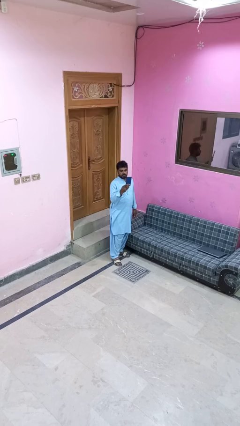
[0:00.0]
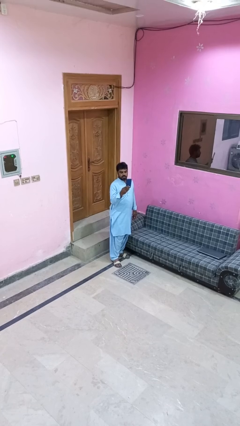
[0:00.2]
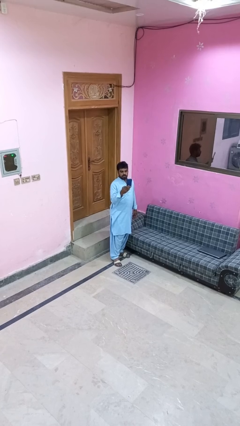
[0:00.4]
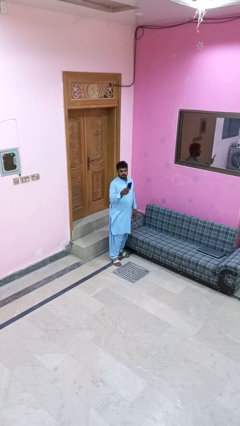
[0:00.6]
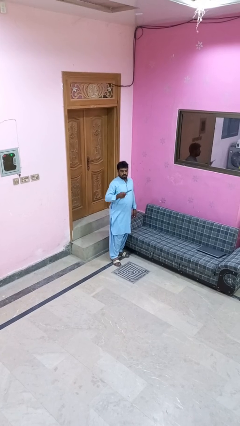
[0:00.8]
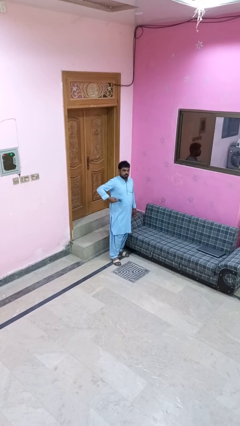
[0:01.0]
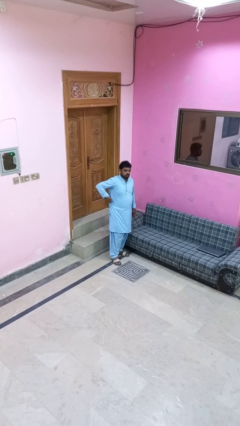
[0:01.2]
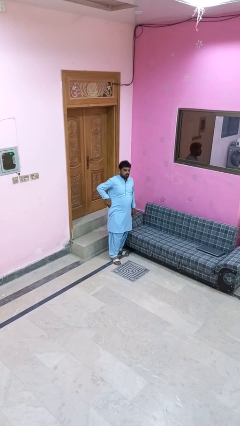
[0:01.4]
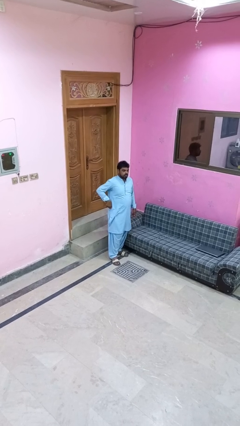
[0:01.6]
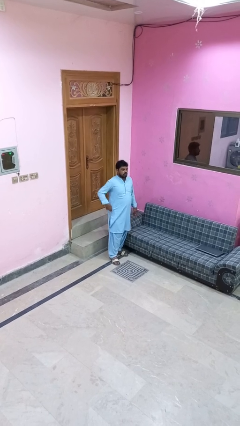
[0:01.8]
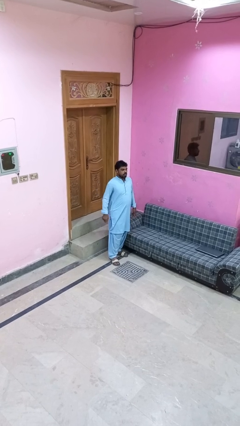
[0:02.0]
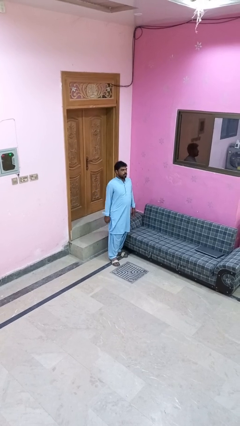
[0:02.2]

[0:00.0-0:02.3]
person puts phone into pocket

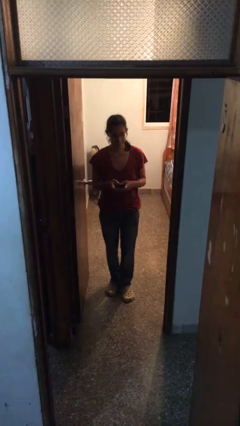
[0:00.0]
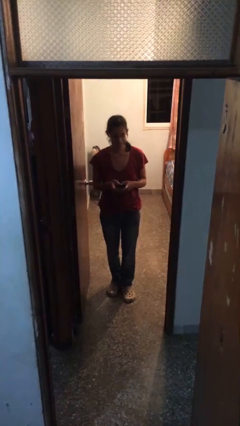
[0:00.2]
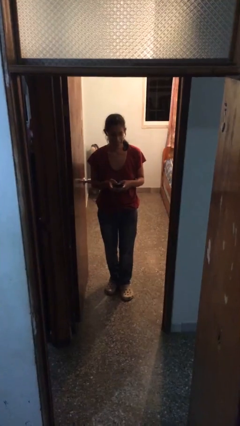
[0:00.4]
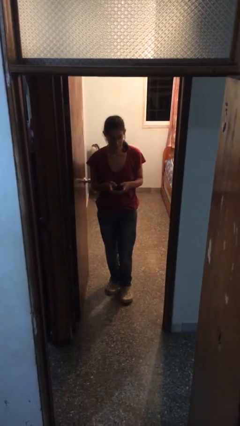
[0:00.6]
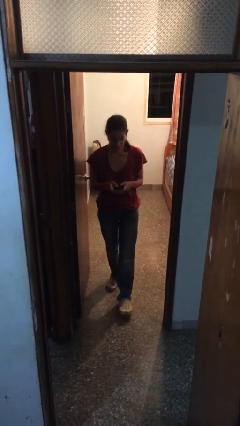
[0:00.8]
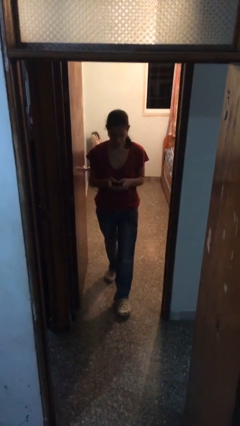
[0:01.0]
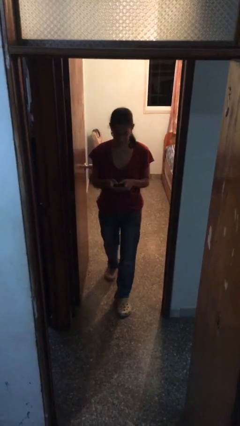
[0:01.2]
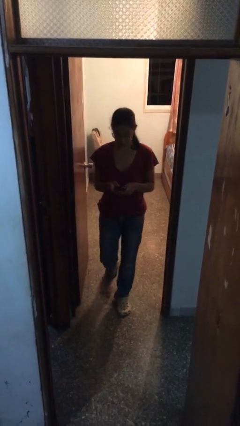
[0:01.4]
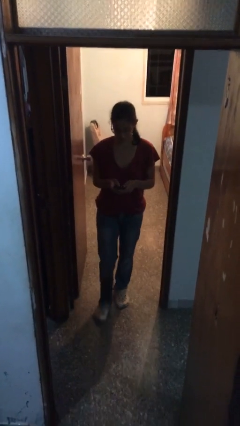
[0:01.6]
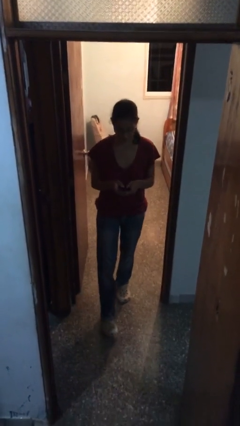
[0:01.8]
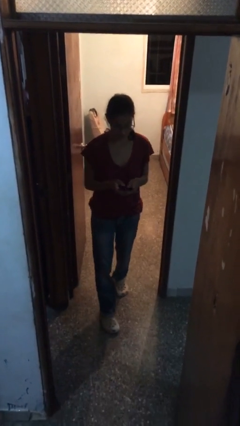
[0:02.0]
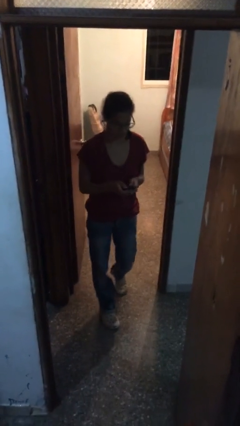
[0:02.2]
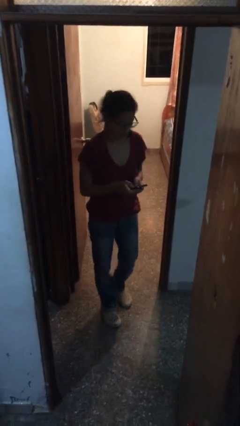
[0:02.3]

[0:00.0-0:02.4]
person enters scene through structure

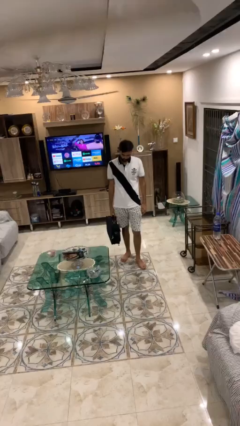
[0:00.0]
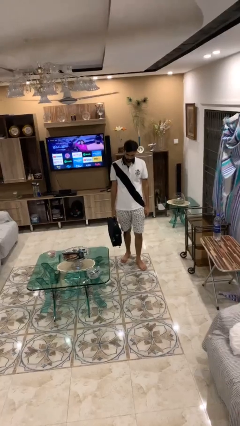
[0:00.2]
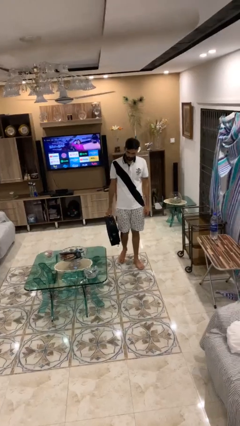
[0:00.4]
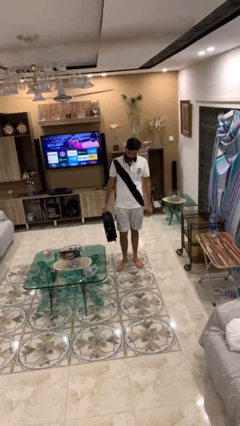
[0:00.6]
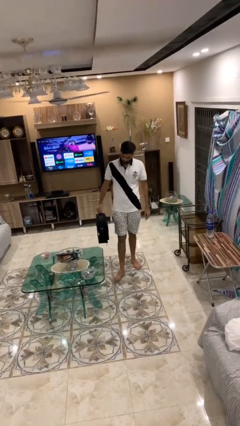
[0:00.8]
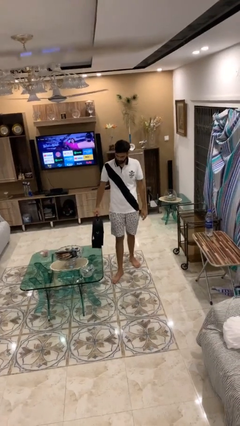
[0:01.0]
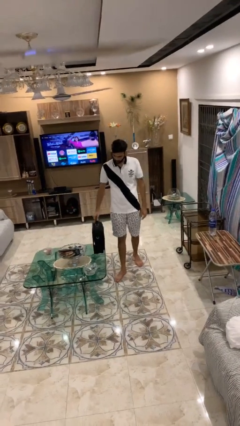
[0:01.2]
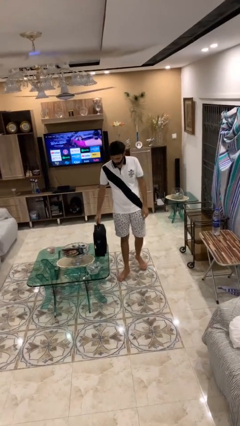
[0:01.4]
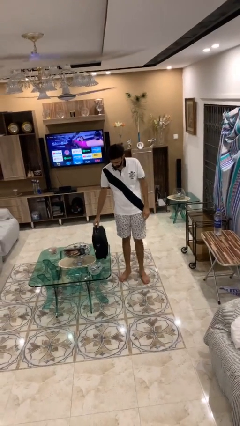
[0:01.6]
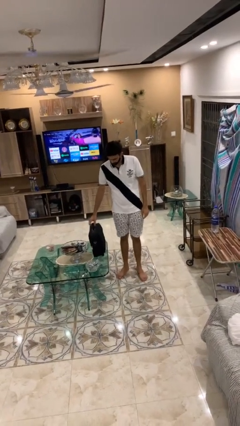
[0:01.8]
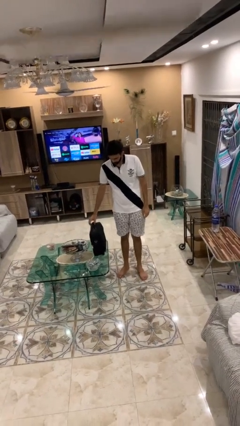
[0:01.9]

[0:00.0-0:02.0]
person puts down object on table

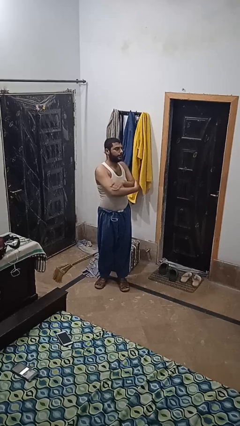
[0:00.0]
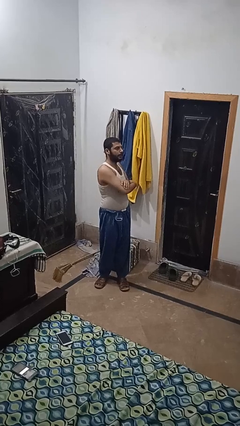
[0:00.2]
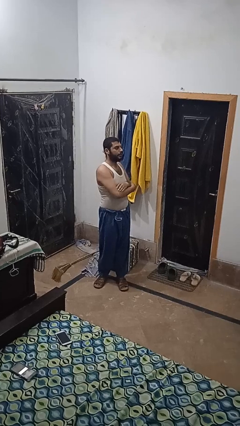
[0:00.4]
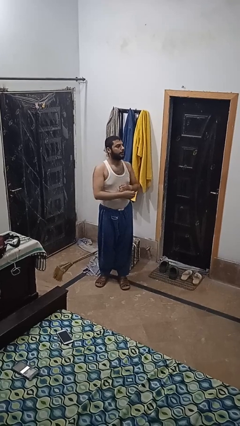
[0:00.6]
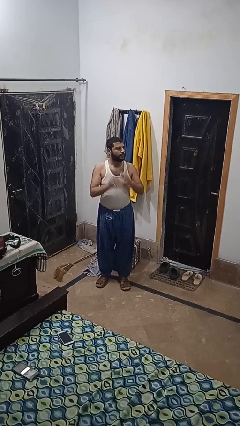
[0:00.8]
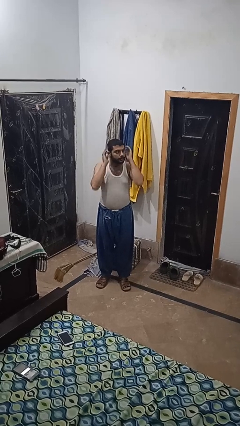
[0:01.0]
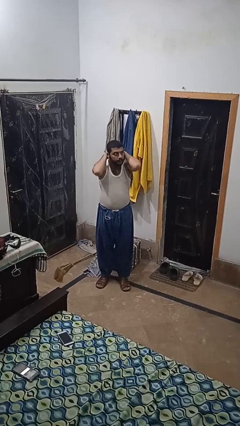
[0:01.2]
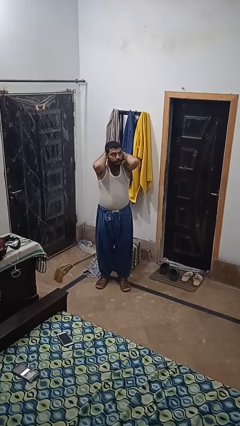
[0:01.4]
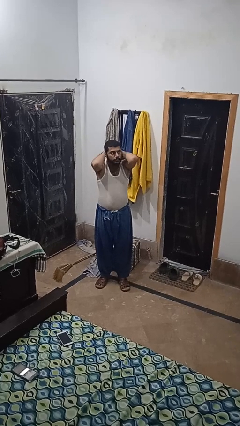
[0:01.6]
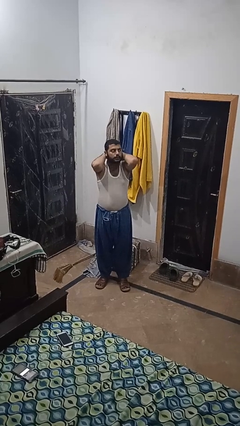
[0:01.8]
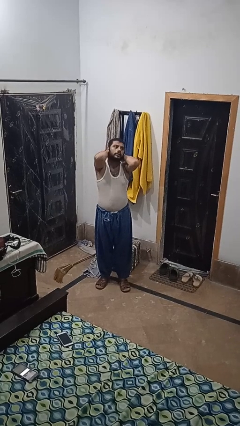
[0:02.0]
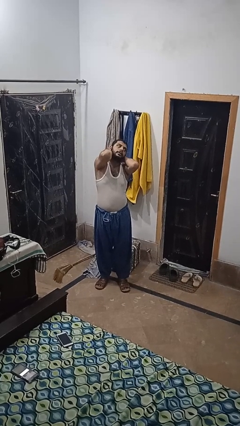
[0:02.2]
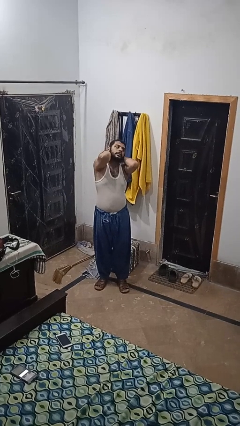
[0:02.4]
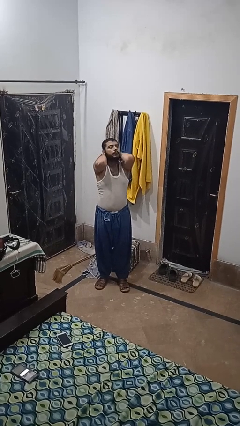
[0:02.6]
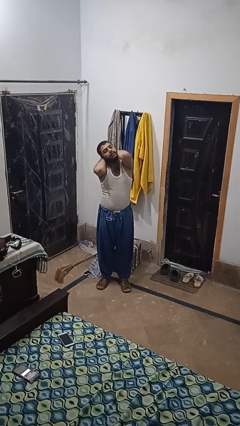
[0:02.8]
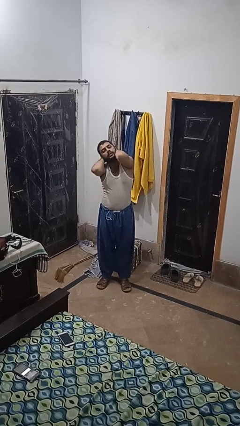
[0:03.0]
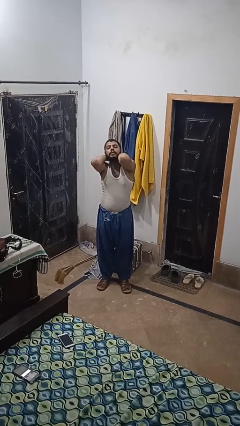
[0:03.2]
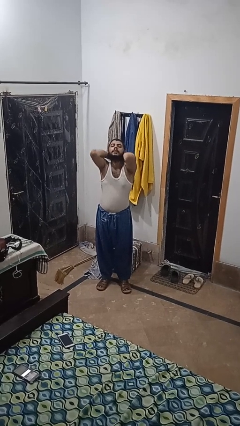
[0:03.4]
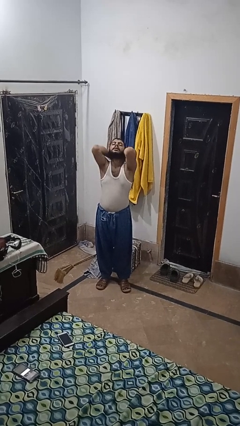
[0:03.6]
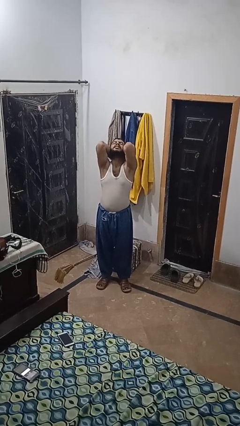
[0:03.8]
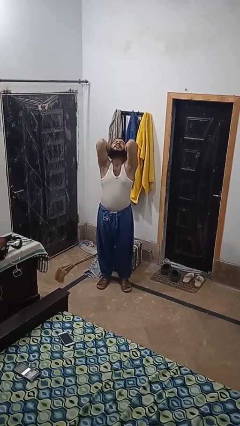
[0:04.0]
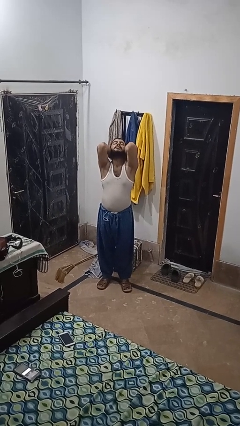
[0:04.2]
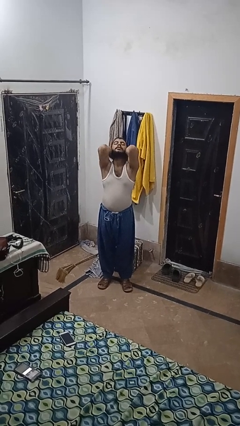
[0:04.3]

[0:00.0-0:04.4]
person stretches arms over head

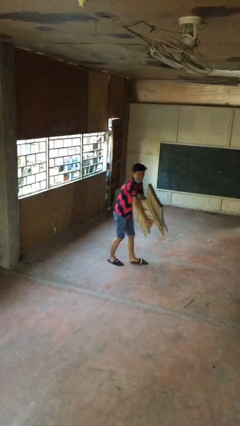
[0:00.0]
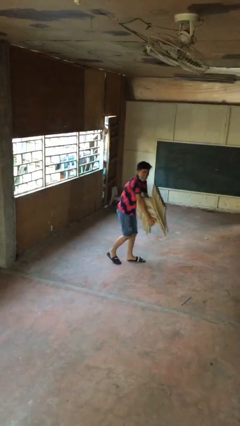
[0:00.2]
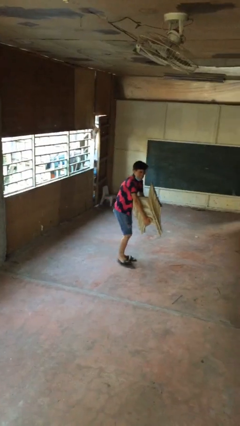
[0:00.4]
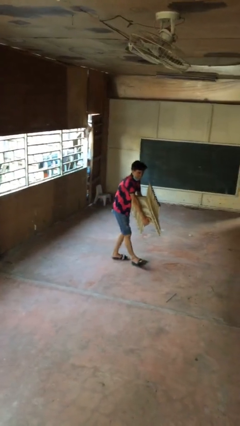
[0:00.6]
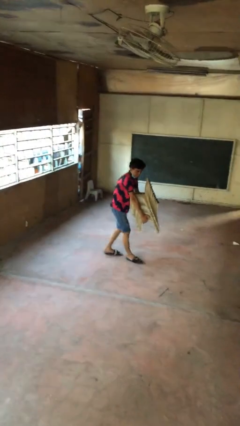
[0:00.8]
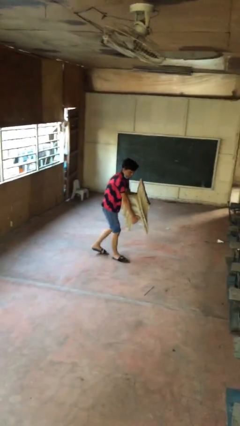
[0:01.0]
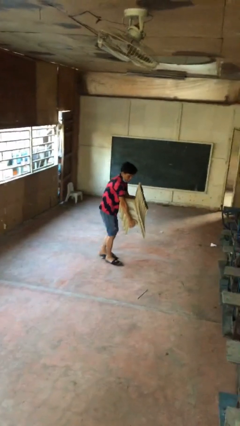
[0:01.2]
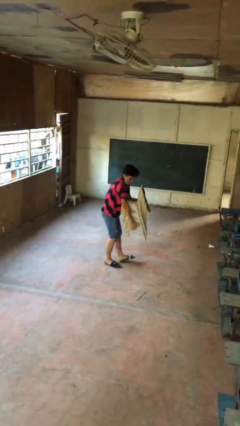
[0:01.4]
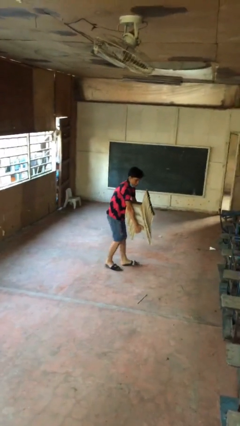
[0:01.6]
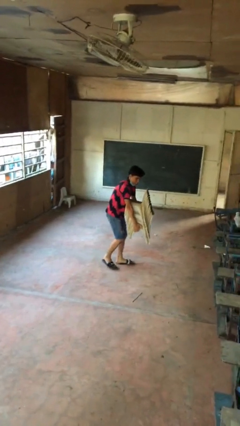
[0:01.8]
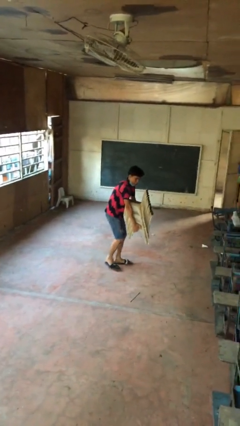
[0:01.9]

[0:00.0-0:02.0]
person carries heavy object

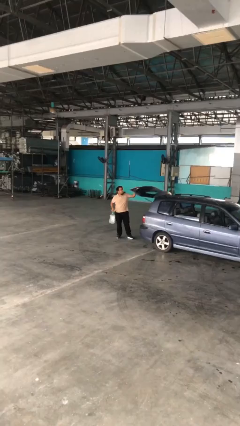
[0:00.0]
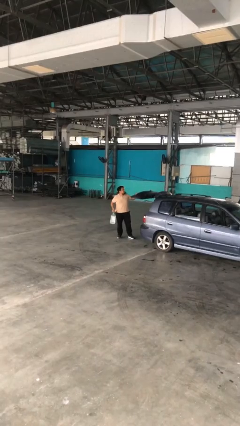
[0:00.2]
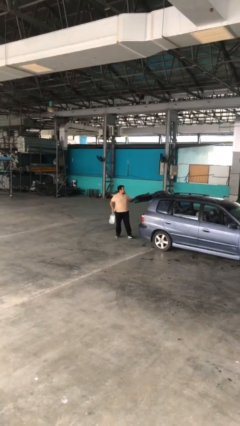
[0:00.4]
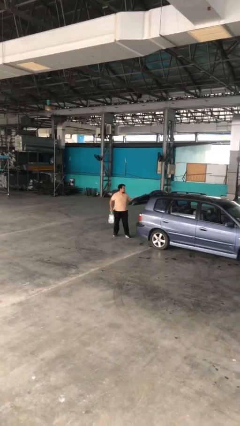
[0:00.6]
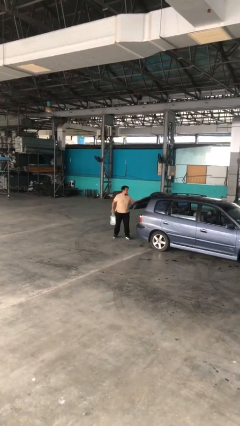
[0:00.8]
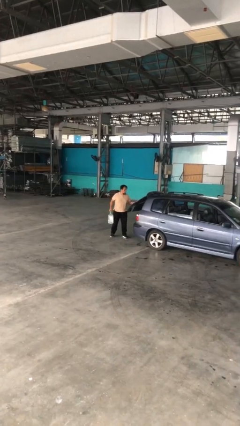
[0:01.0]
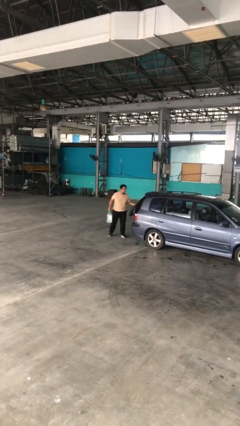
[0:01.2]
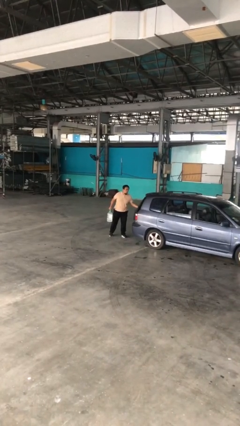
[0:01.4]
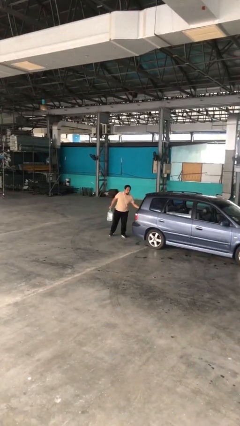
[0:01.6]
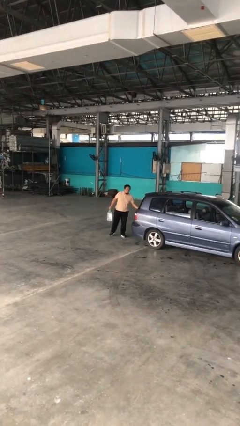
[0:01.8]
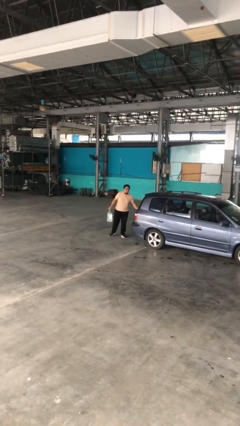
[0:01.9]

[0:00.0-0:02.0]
person closes car trunk

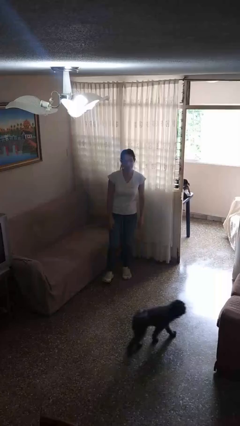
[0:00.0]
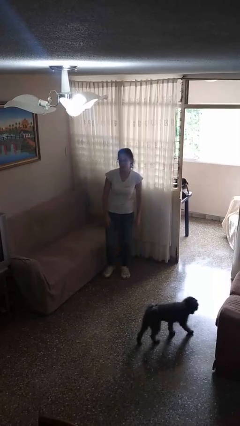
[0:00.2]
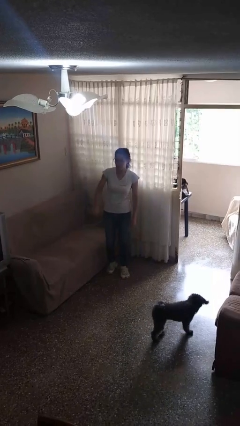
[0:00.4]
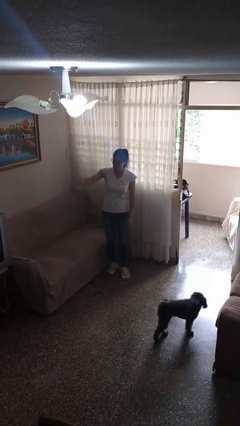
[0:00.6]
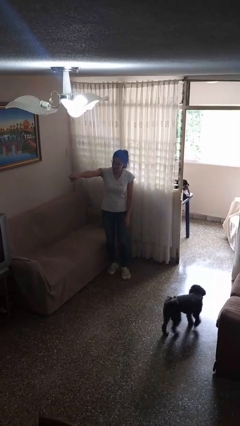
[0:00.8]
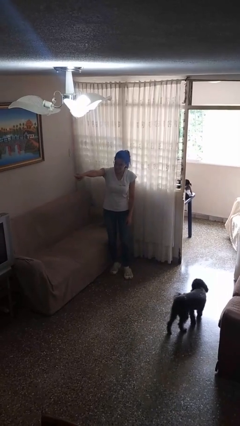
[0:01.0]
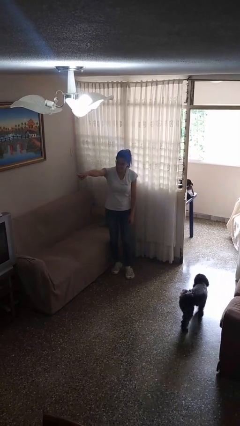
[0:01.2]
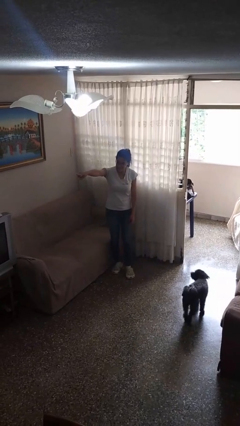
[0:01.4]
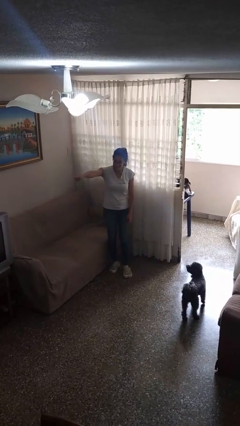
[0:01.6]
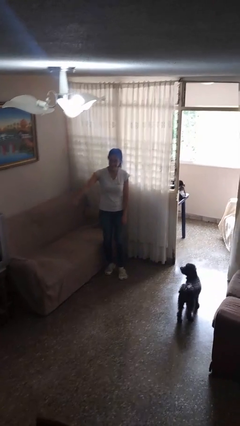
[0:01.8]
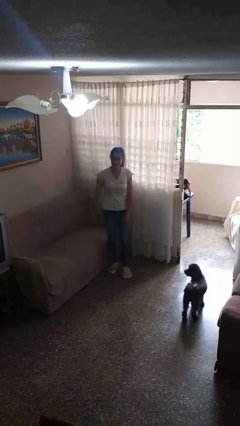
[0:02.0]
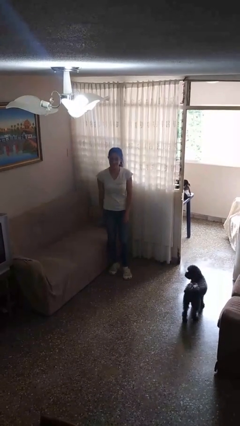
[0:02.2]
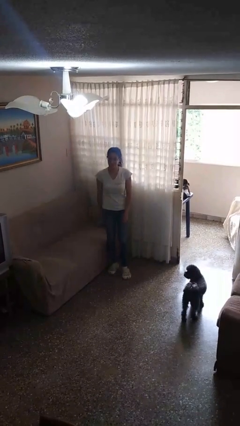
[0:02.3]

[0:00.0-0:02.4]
person points at person
